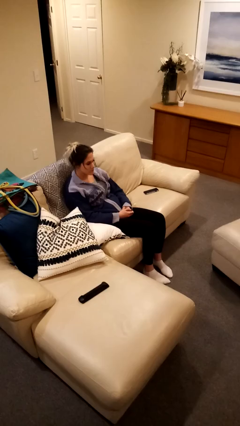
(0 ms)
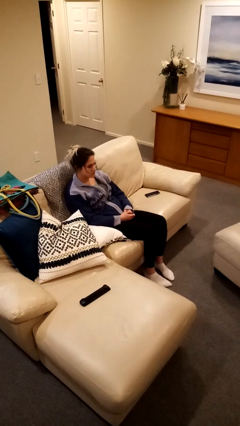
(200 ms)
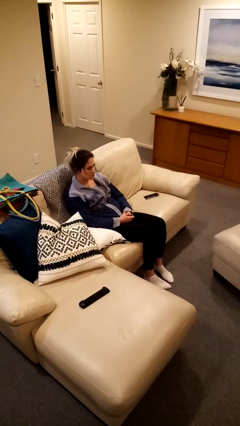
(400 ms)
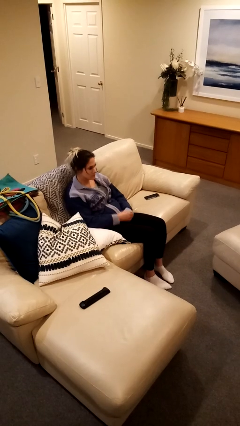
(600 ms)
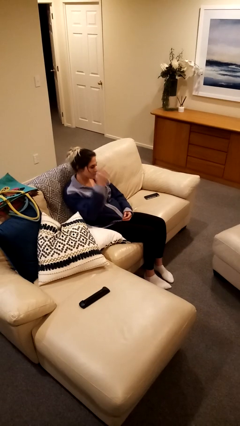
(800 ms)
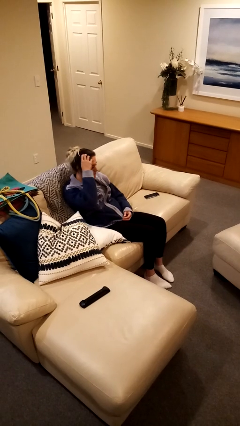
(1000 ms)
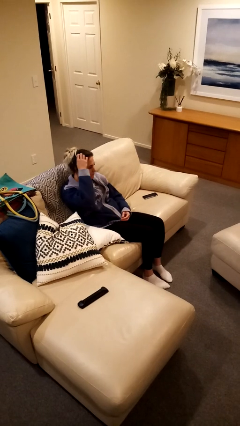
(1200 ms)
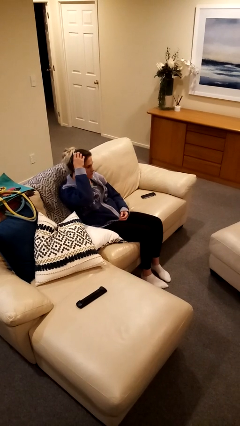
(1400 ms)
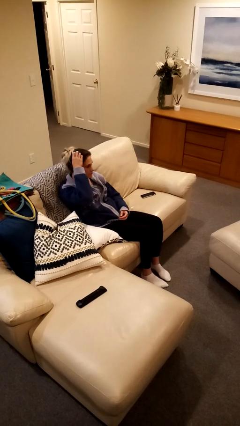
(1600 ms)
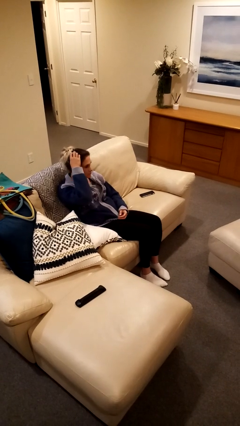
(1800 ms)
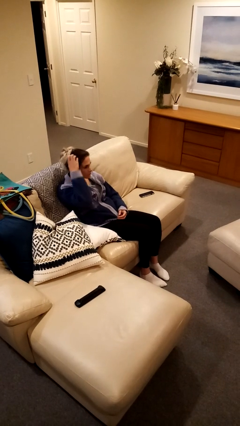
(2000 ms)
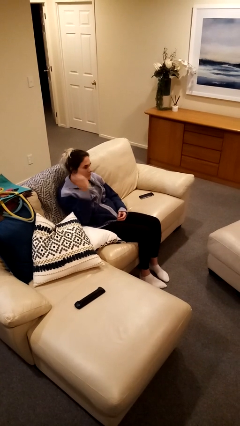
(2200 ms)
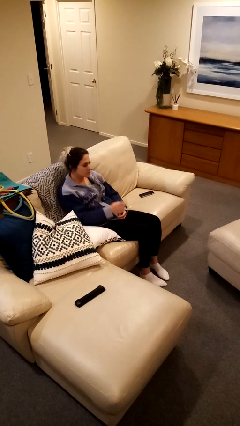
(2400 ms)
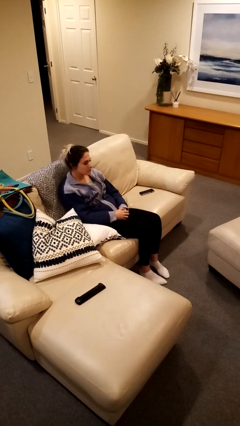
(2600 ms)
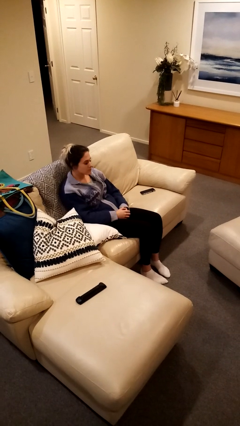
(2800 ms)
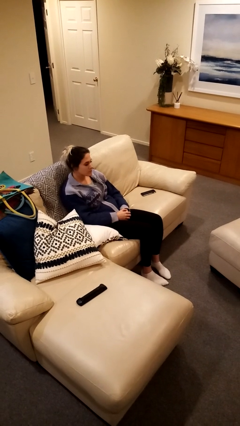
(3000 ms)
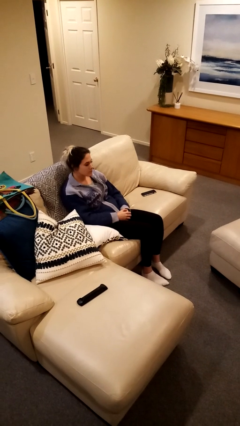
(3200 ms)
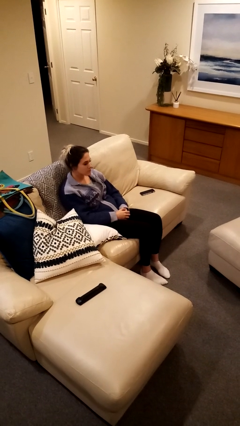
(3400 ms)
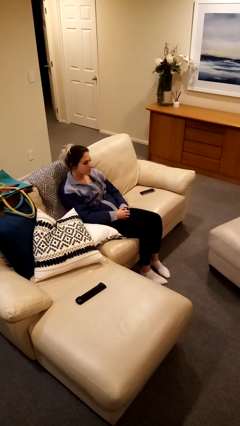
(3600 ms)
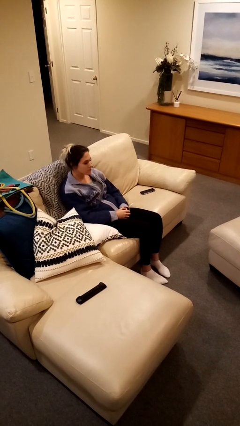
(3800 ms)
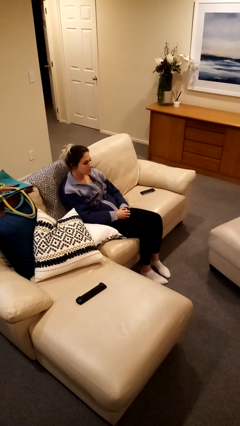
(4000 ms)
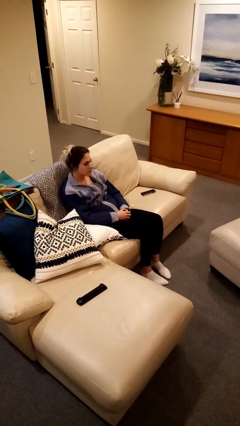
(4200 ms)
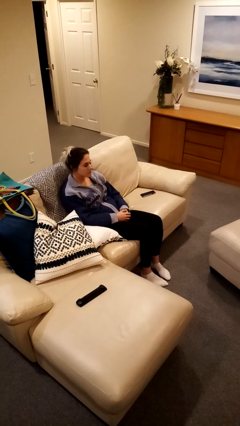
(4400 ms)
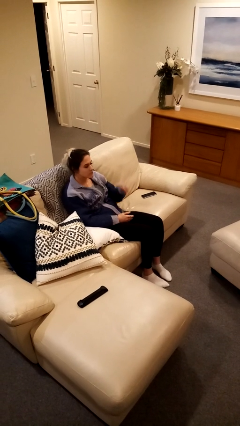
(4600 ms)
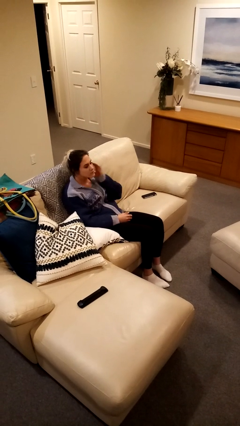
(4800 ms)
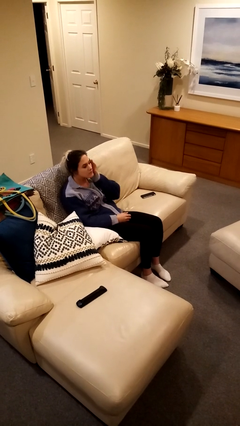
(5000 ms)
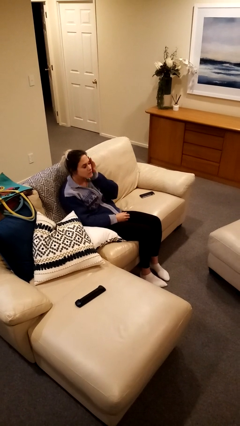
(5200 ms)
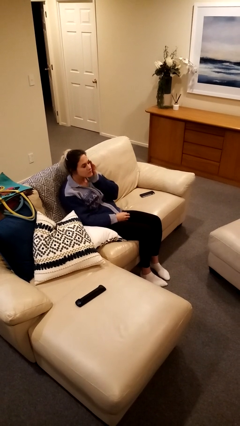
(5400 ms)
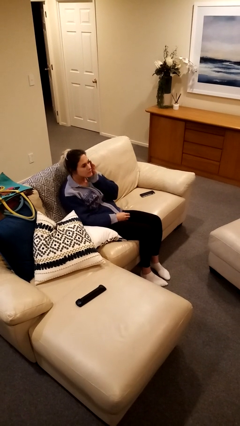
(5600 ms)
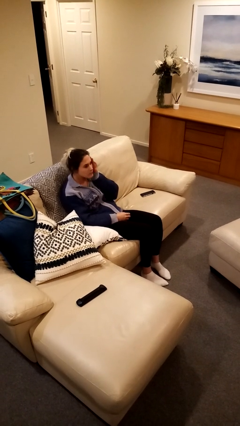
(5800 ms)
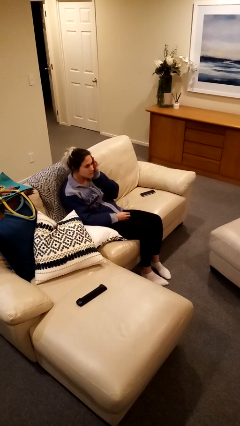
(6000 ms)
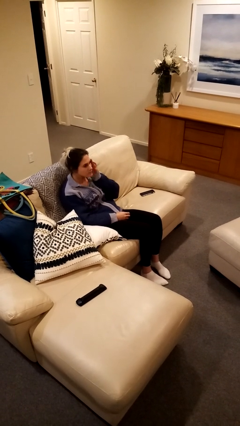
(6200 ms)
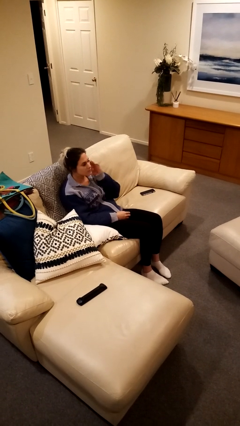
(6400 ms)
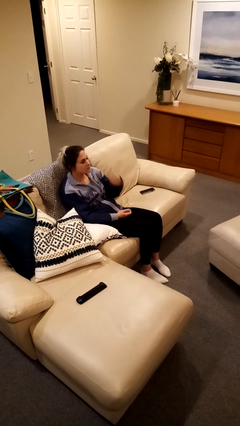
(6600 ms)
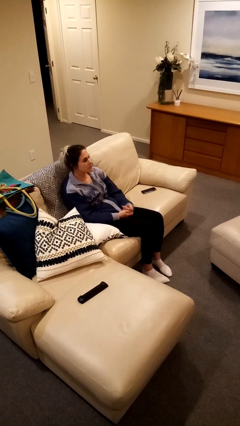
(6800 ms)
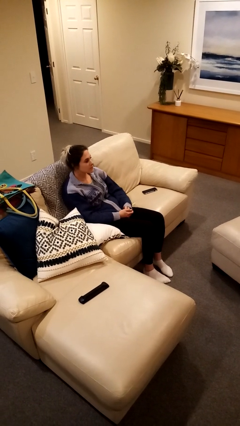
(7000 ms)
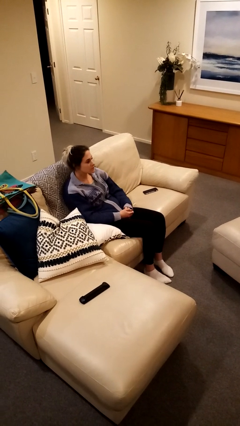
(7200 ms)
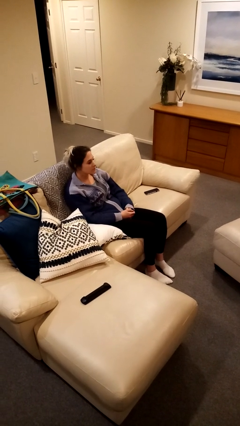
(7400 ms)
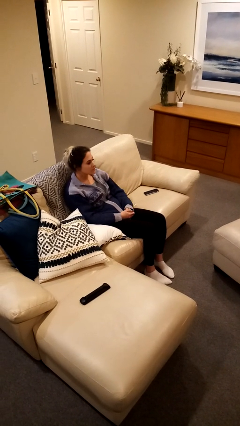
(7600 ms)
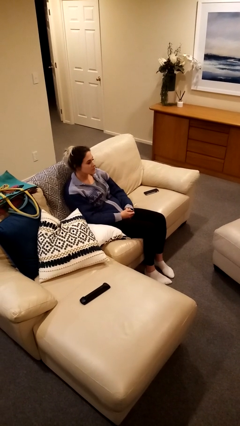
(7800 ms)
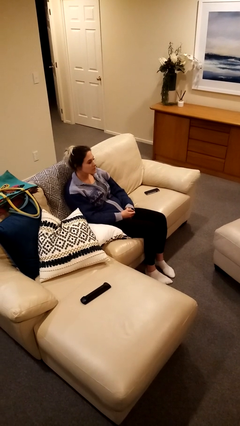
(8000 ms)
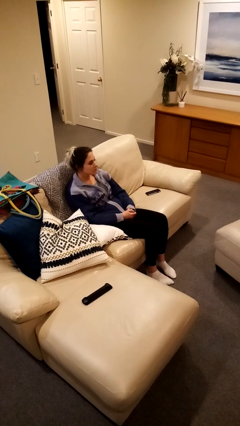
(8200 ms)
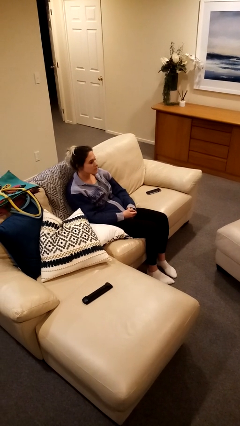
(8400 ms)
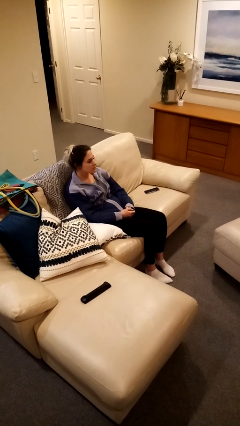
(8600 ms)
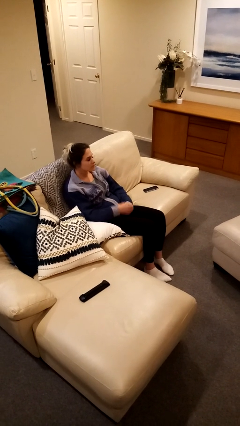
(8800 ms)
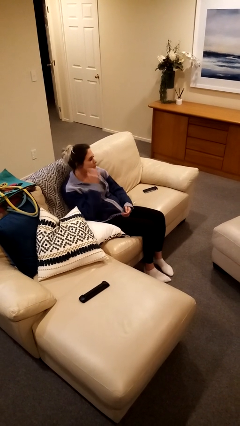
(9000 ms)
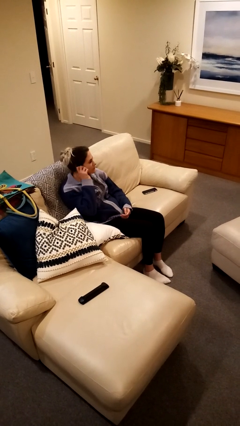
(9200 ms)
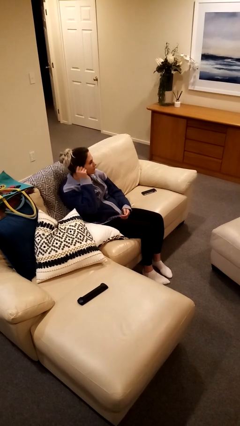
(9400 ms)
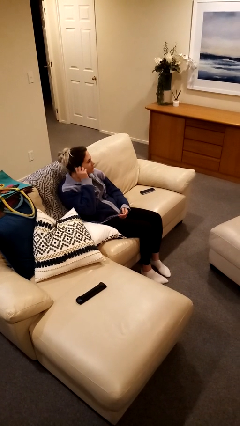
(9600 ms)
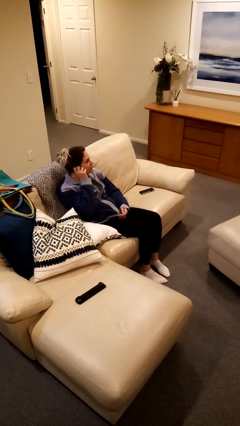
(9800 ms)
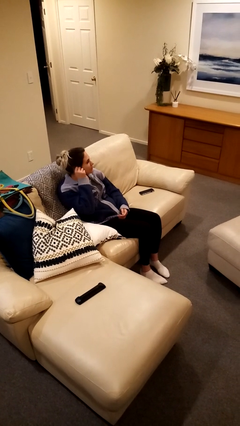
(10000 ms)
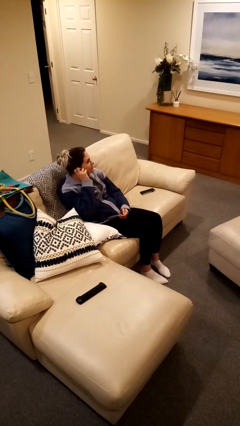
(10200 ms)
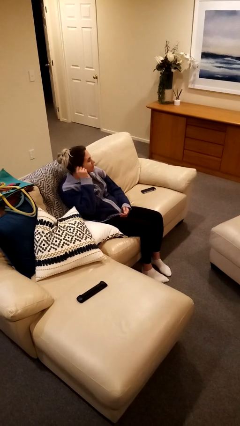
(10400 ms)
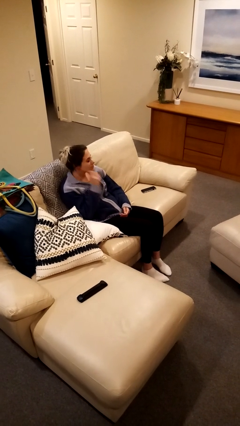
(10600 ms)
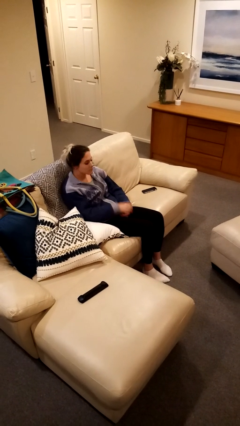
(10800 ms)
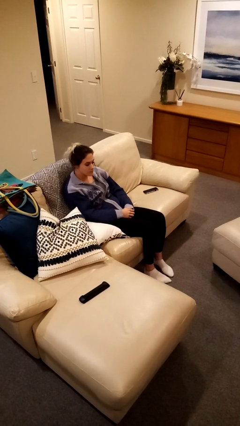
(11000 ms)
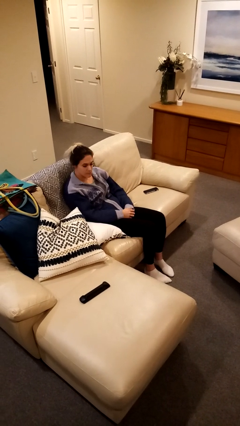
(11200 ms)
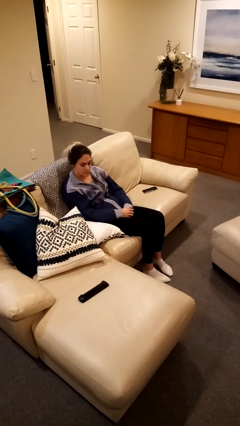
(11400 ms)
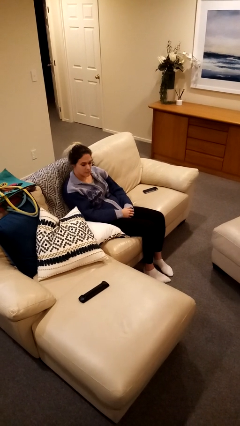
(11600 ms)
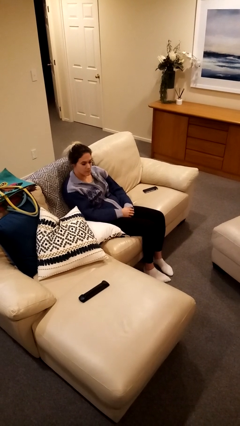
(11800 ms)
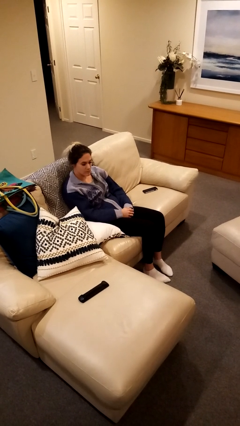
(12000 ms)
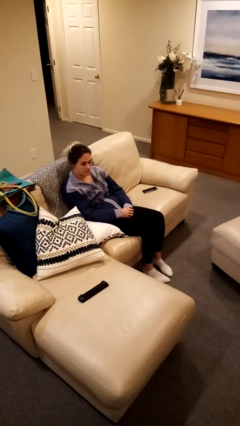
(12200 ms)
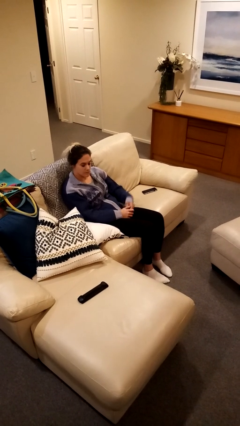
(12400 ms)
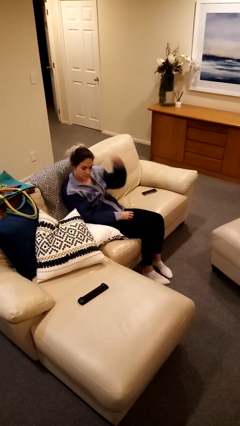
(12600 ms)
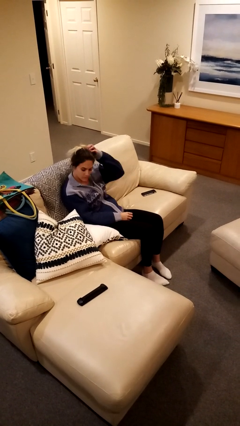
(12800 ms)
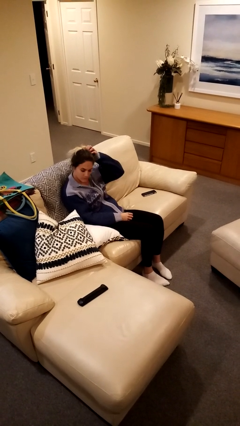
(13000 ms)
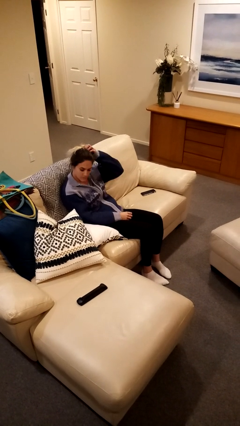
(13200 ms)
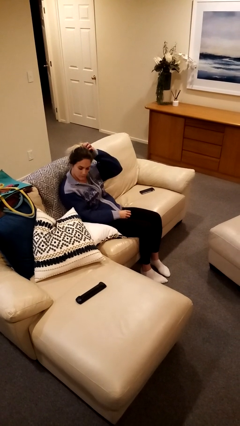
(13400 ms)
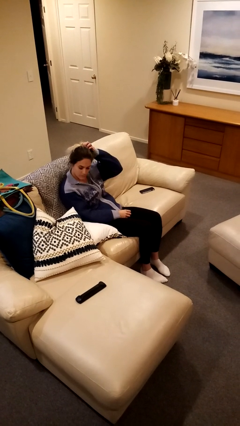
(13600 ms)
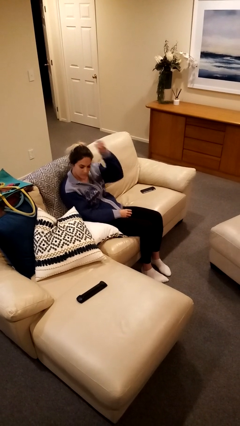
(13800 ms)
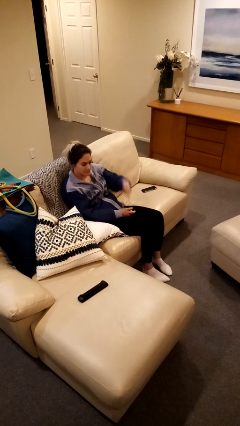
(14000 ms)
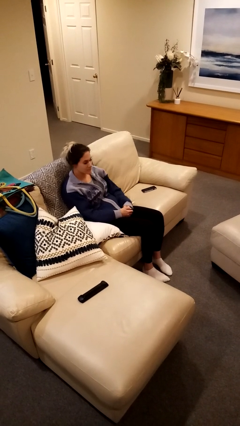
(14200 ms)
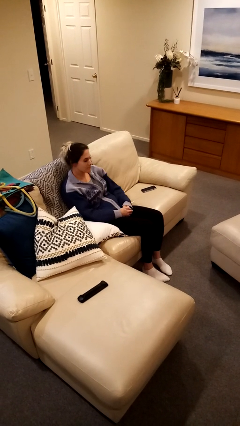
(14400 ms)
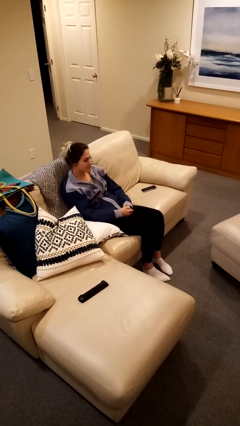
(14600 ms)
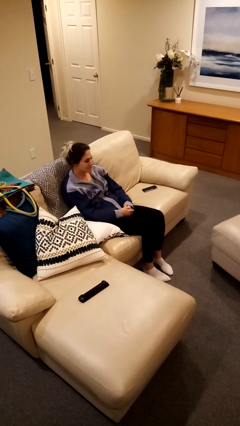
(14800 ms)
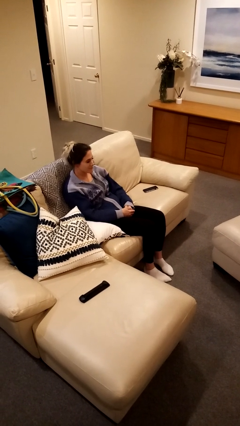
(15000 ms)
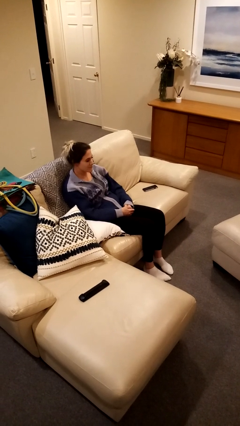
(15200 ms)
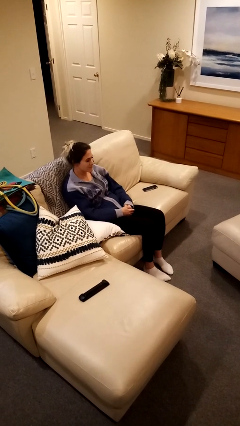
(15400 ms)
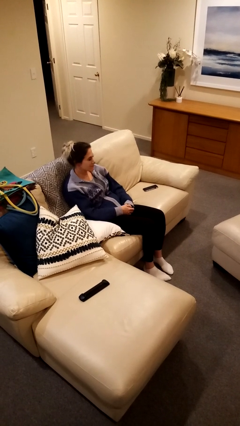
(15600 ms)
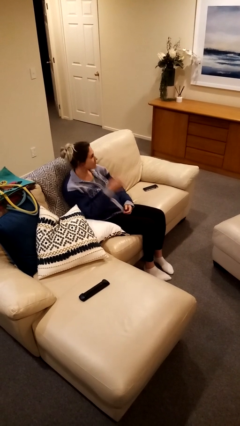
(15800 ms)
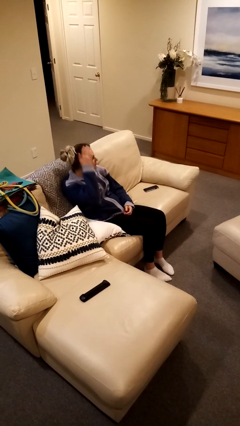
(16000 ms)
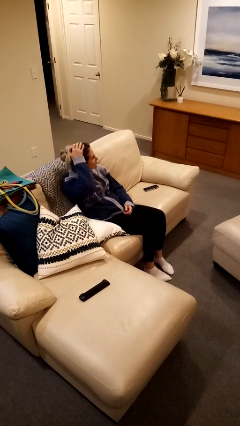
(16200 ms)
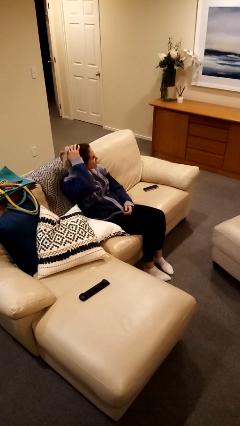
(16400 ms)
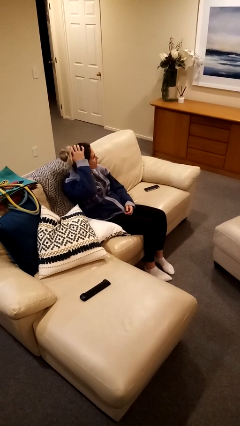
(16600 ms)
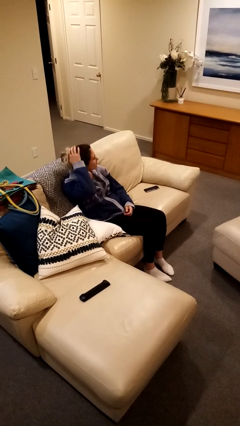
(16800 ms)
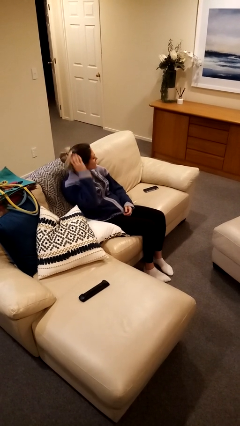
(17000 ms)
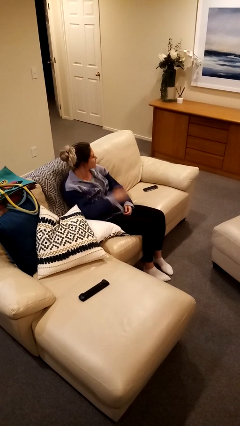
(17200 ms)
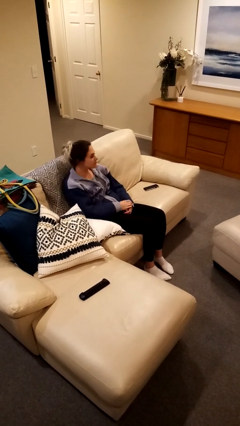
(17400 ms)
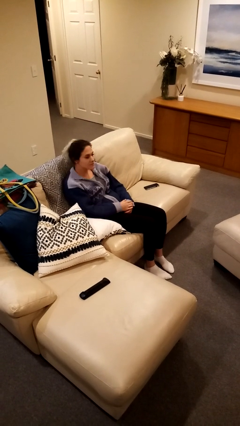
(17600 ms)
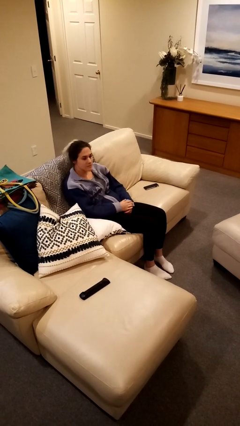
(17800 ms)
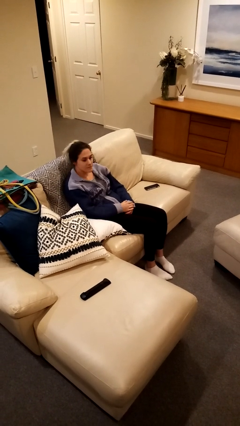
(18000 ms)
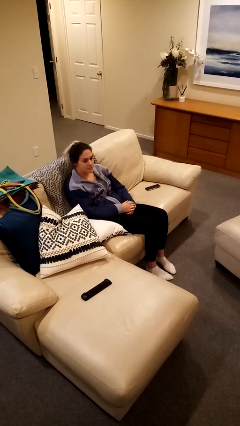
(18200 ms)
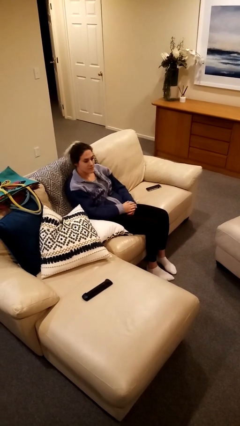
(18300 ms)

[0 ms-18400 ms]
person scratches face
